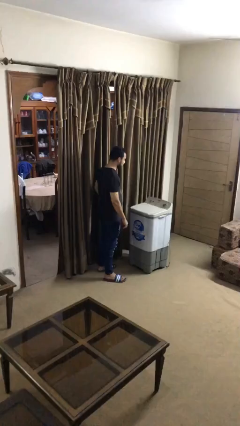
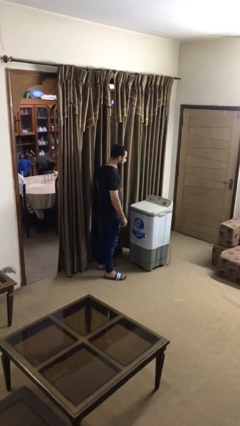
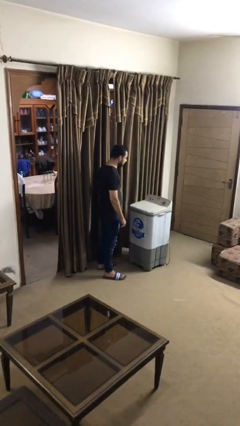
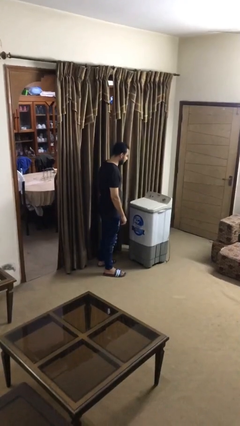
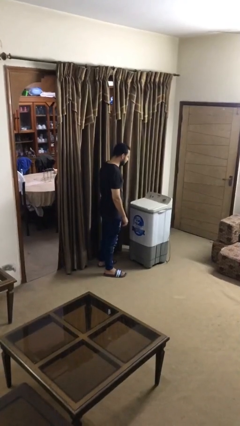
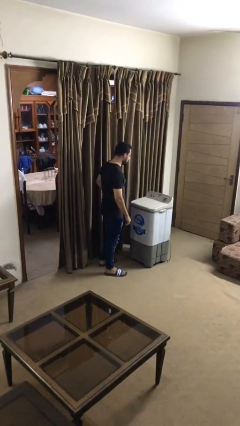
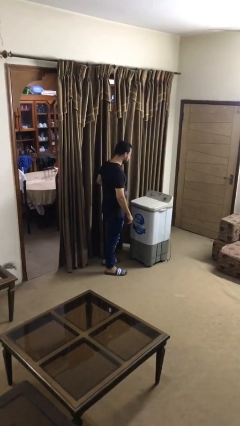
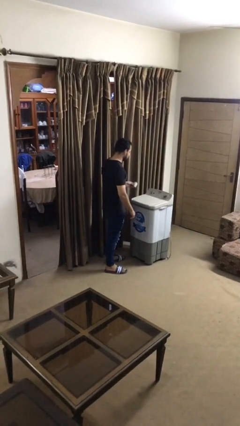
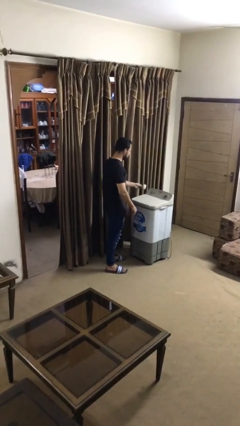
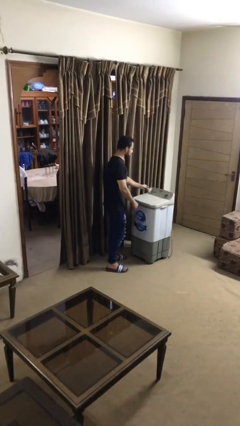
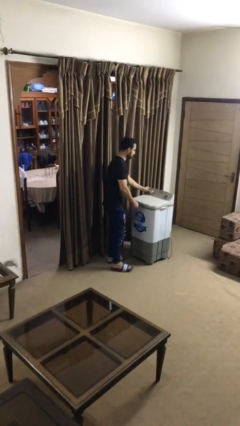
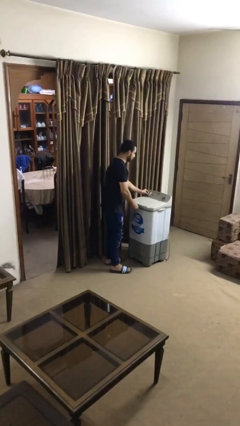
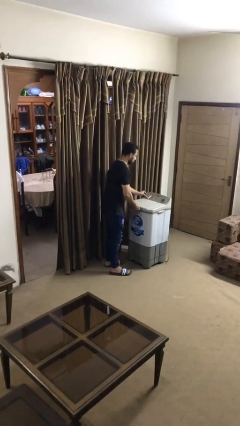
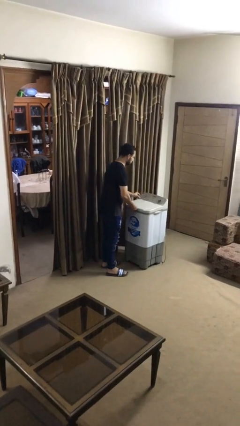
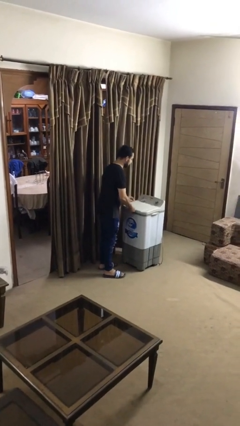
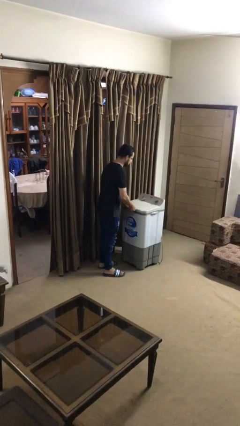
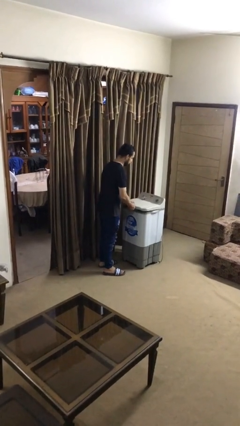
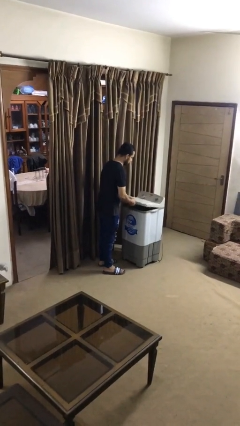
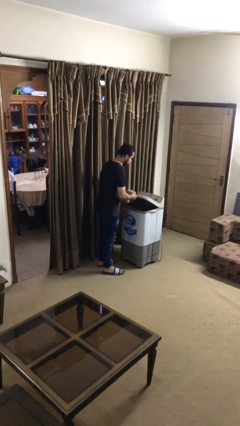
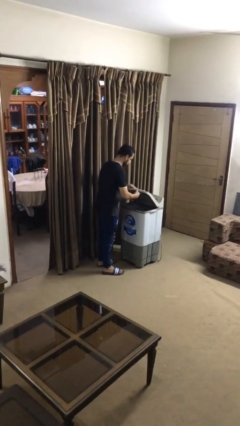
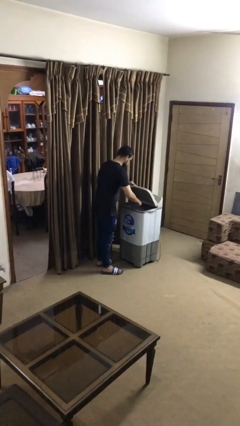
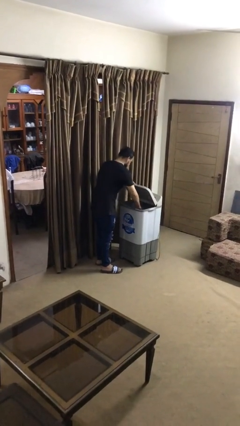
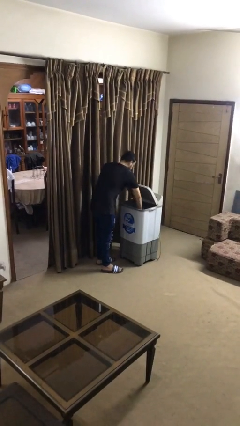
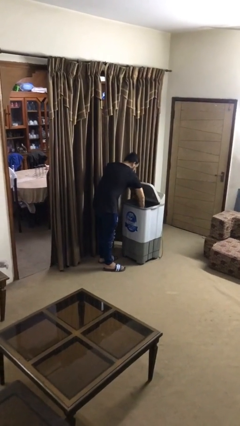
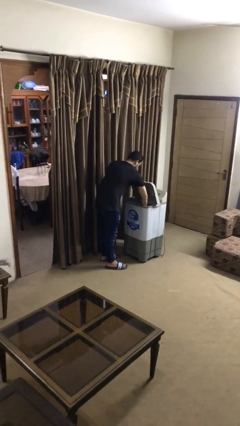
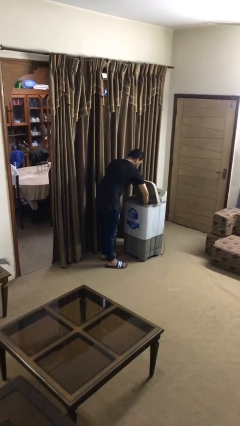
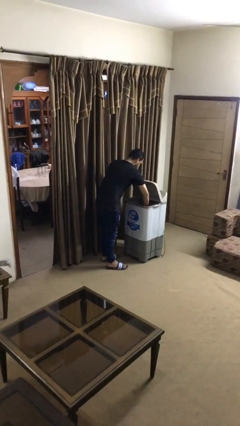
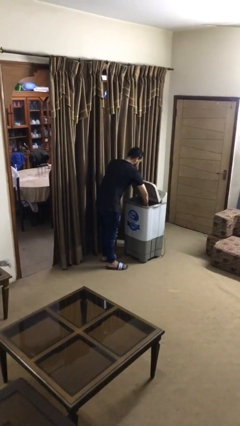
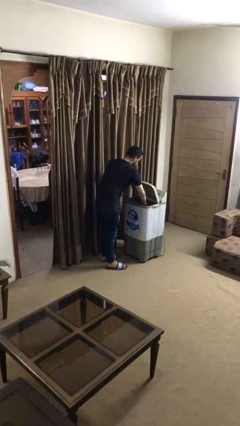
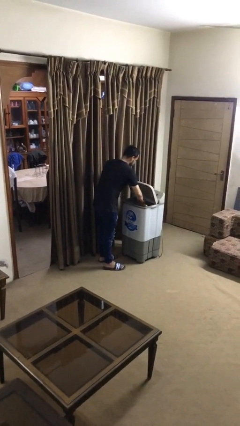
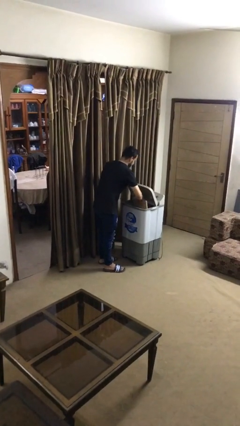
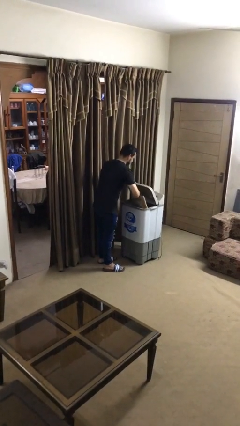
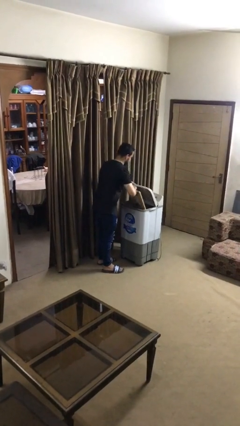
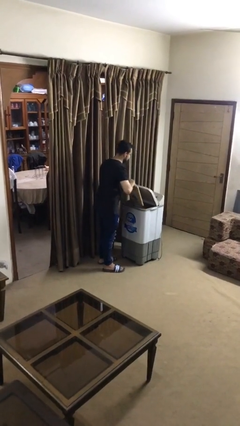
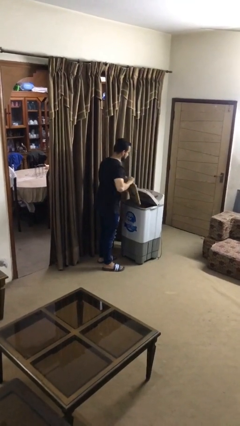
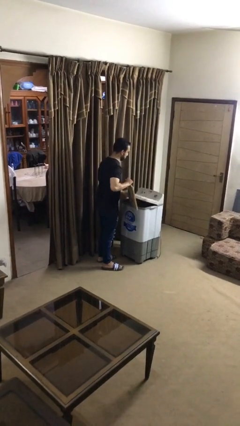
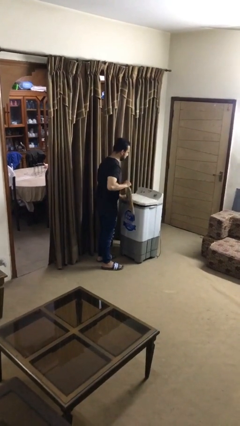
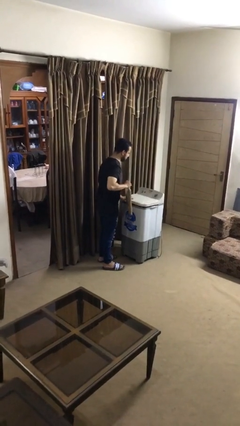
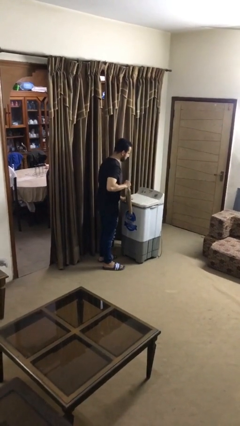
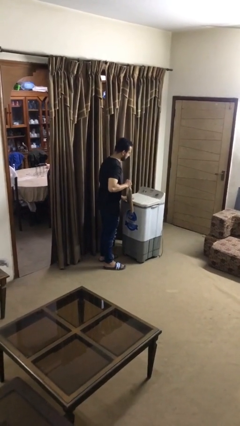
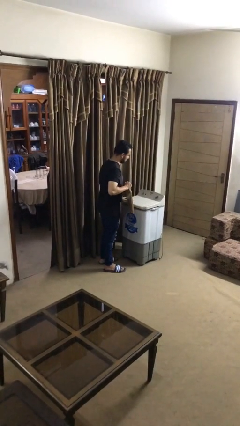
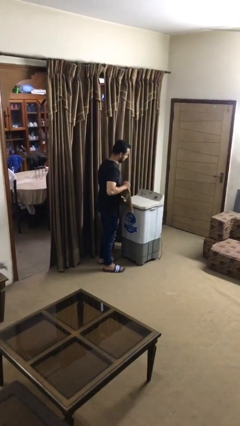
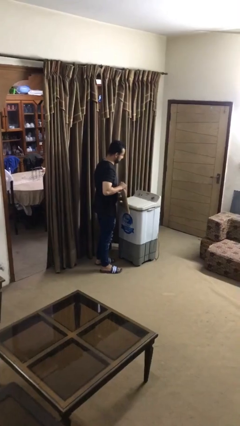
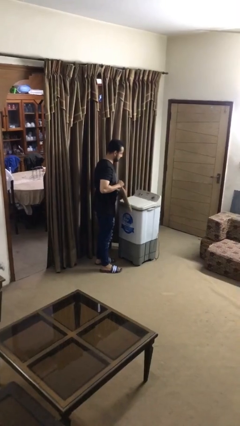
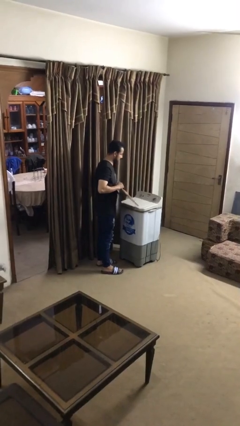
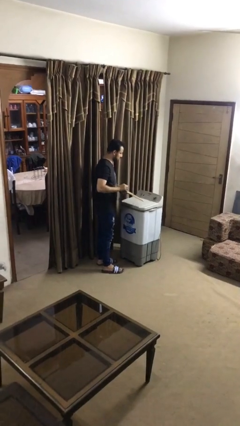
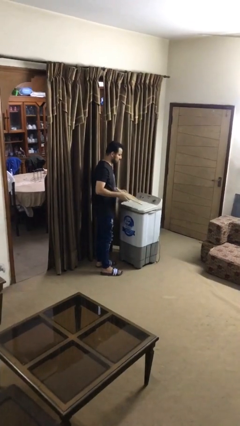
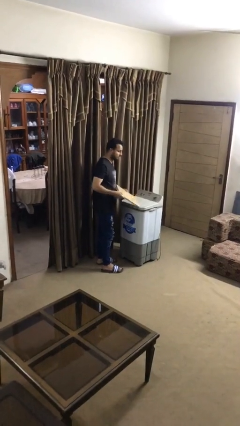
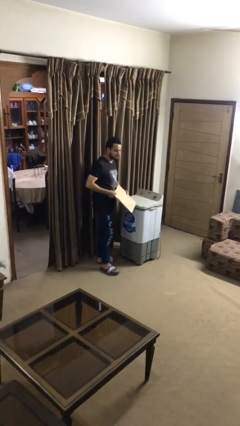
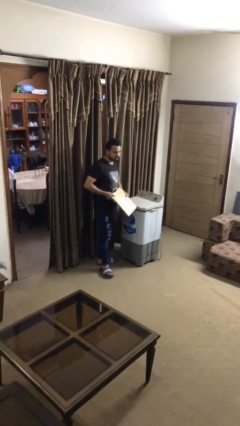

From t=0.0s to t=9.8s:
person purchases from machine

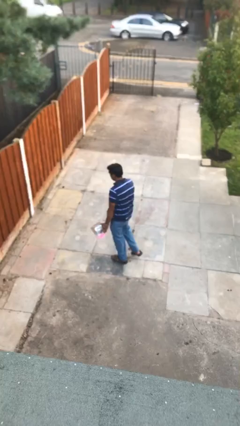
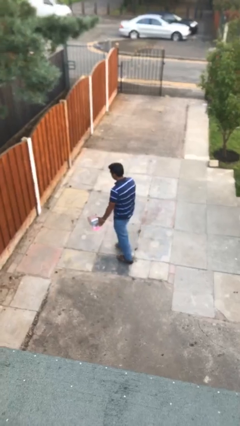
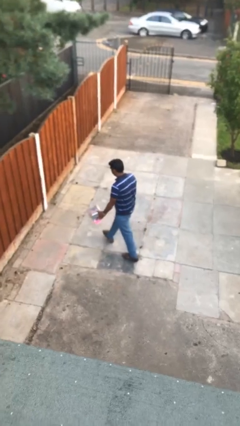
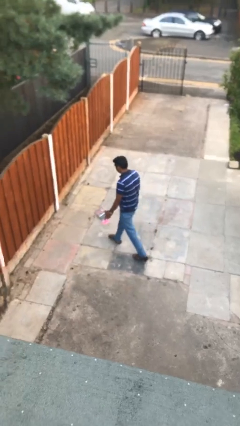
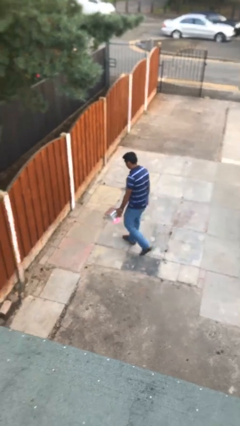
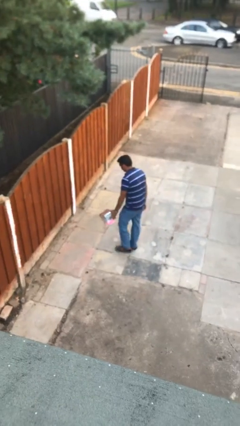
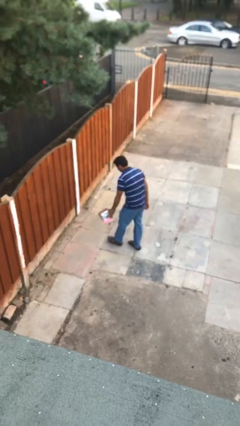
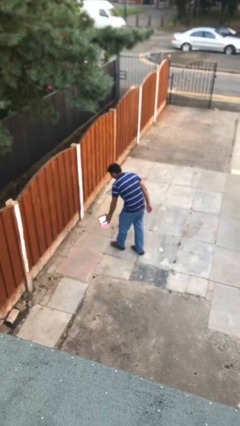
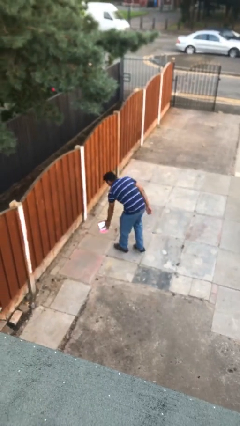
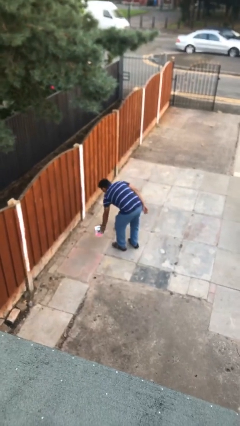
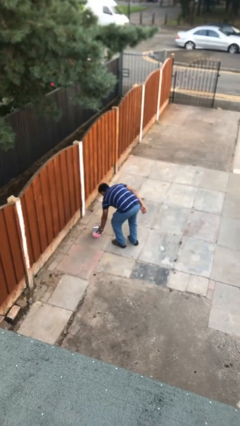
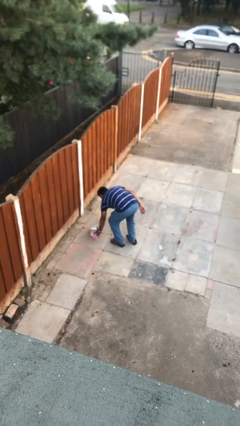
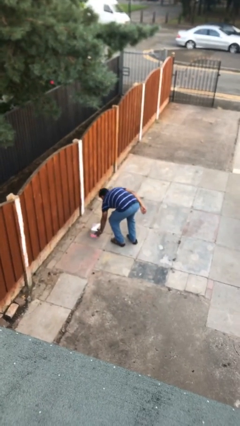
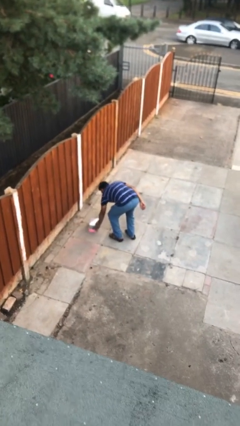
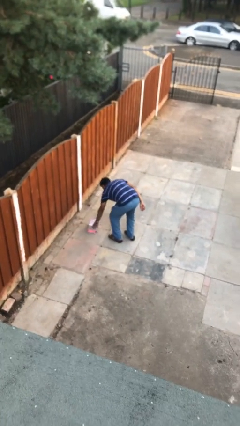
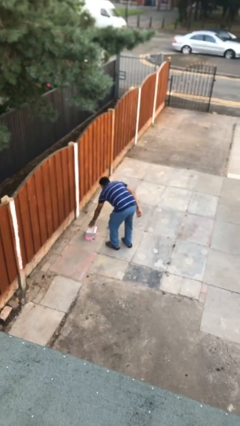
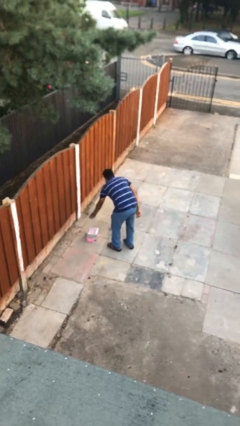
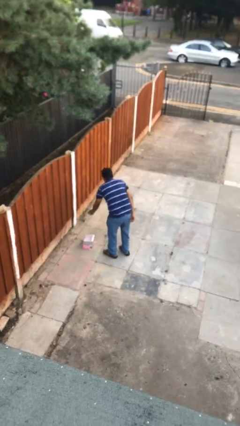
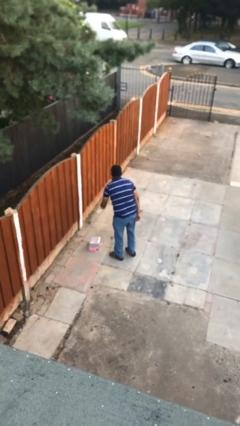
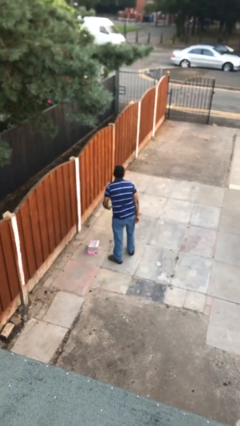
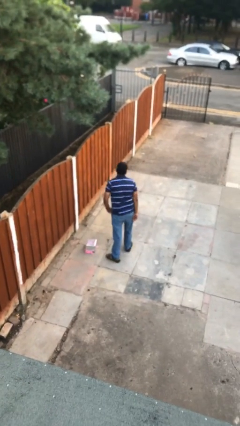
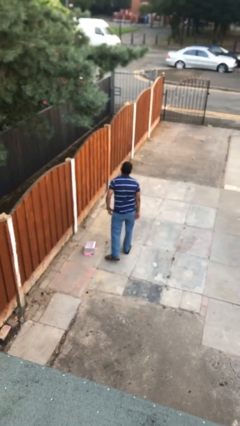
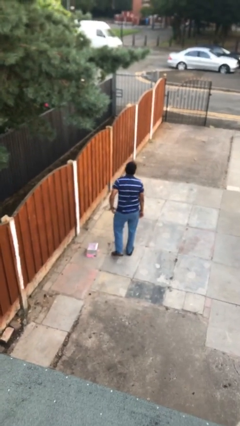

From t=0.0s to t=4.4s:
person puts down object on floor

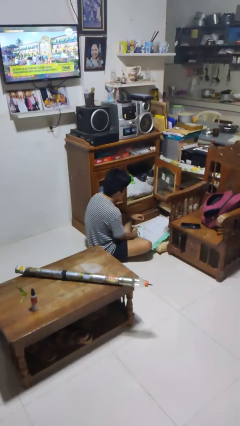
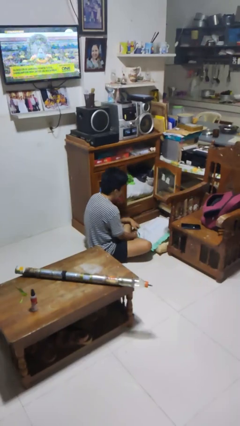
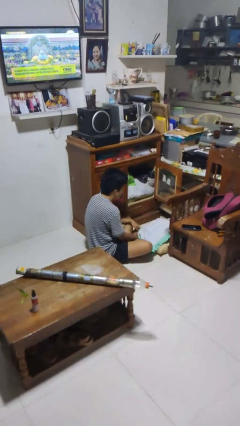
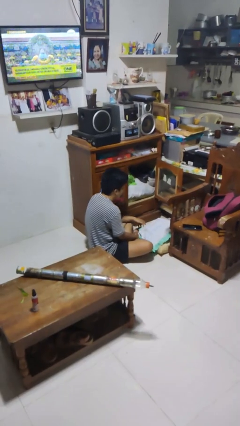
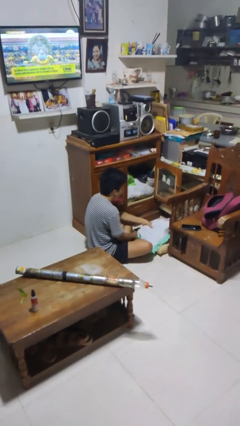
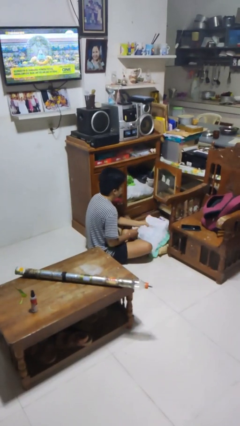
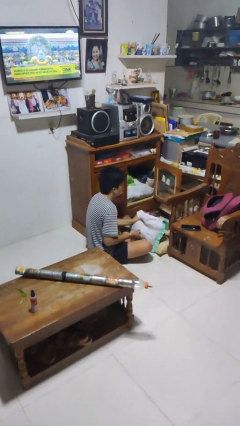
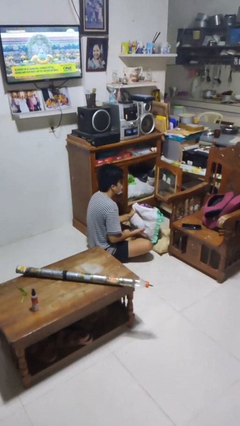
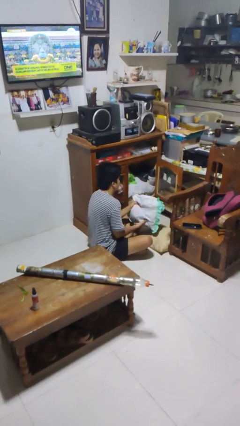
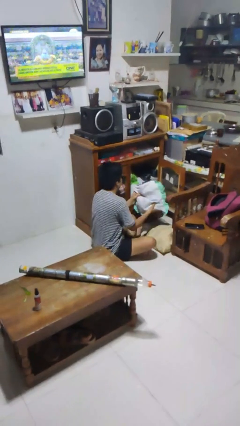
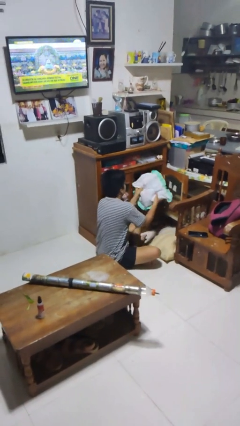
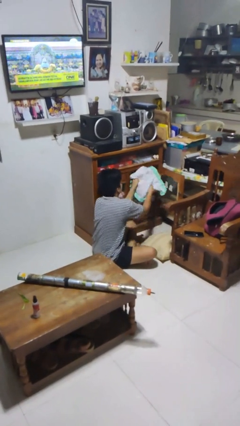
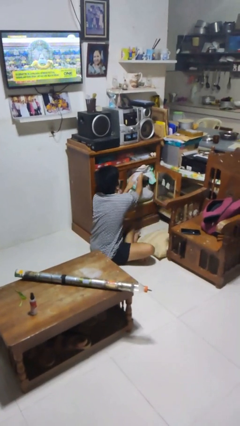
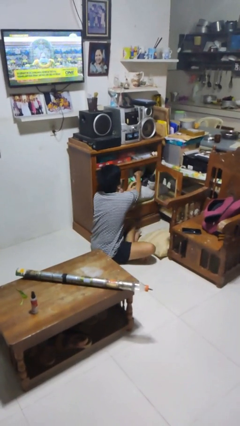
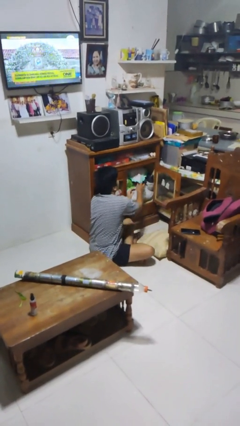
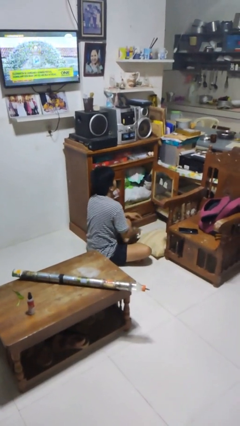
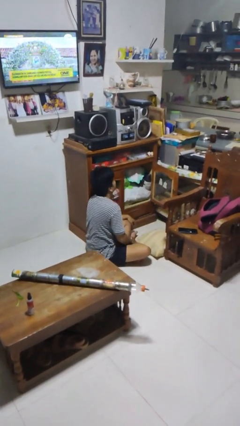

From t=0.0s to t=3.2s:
person takes clothes from dresser

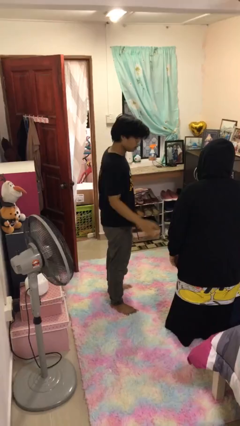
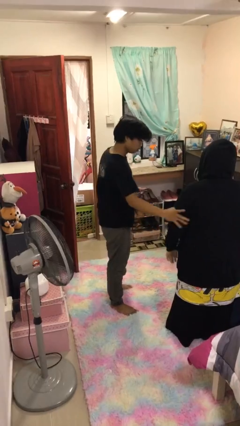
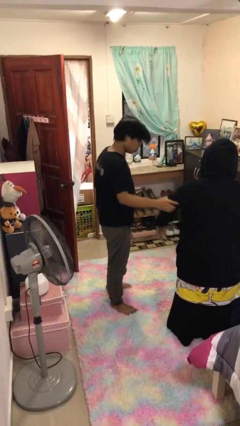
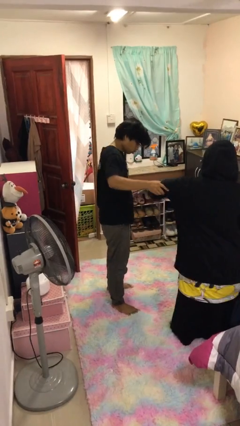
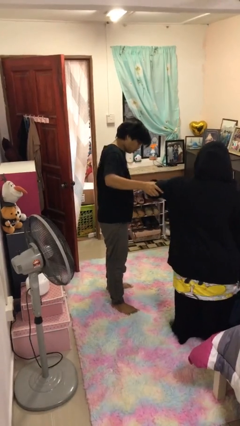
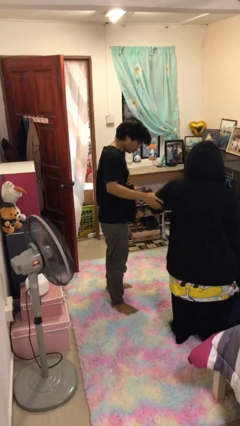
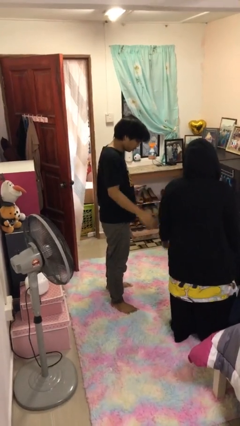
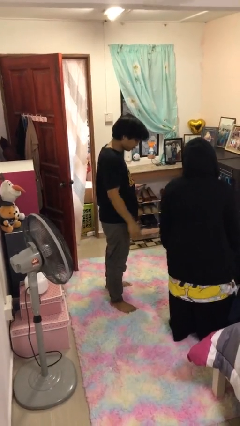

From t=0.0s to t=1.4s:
person grabs person by bicep
